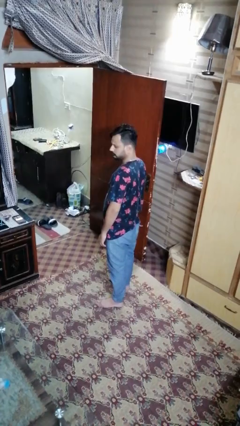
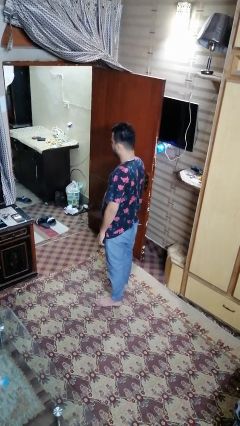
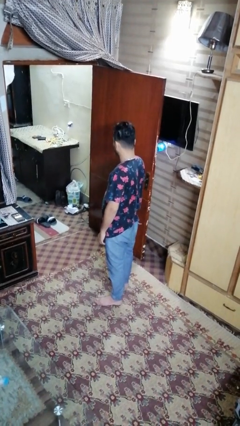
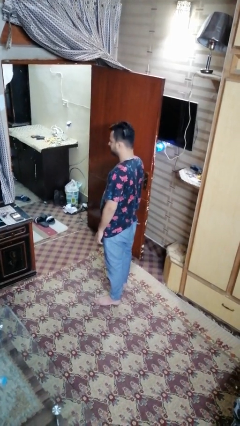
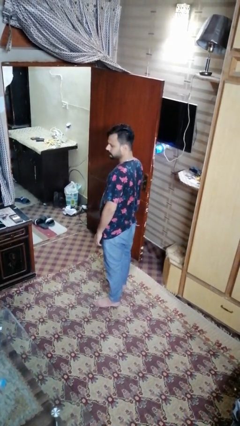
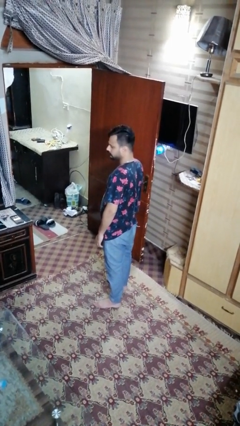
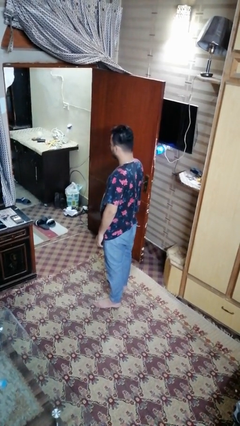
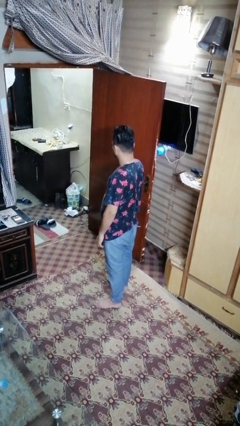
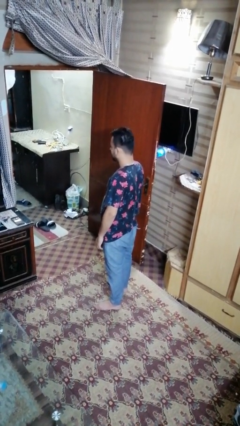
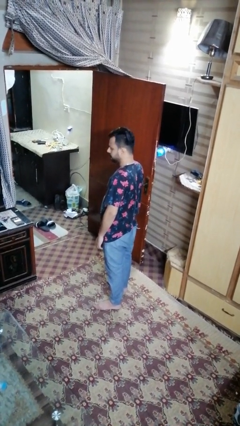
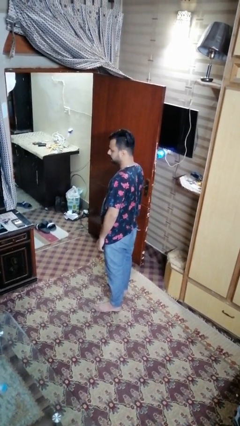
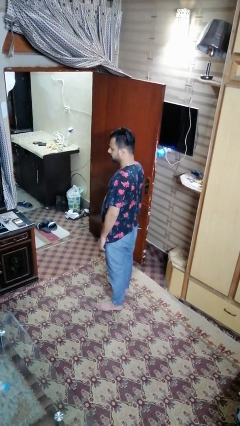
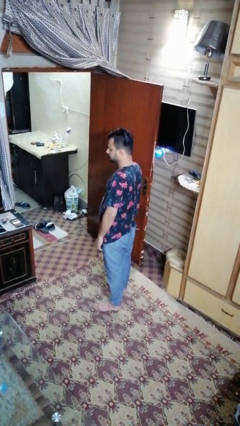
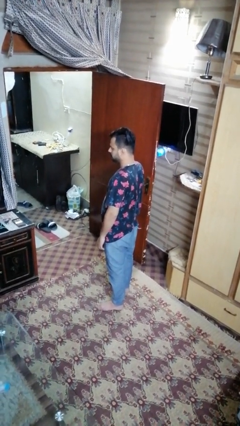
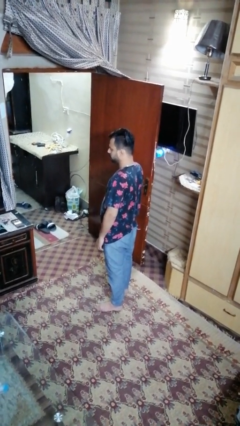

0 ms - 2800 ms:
person shakes head

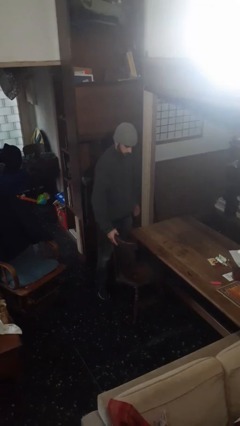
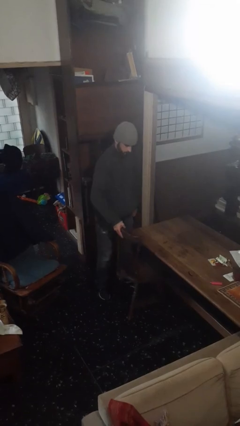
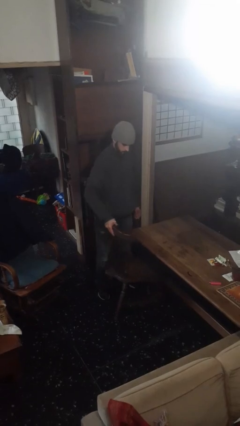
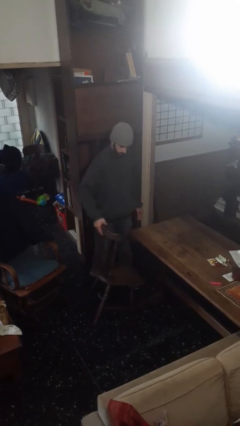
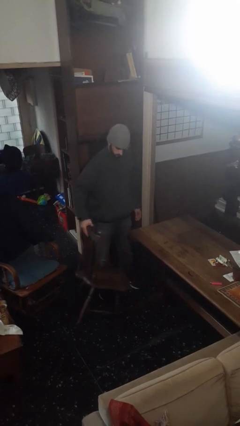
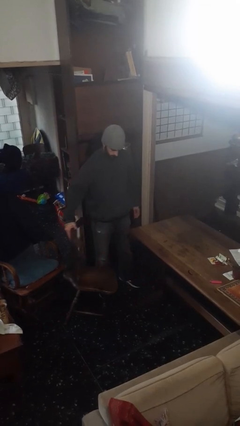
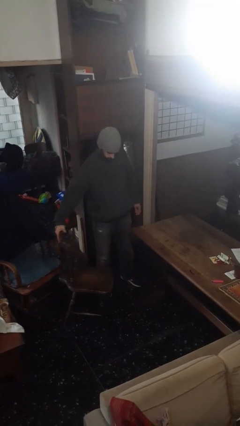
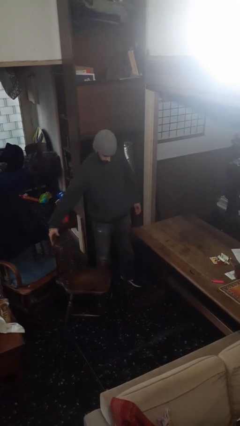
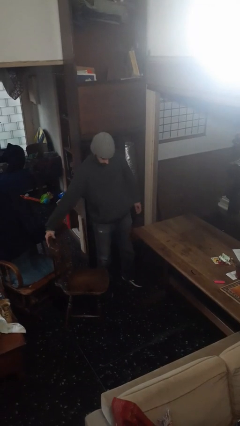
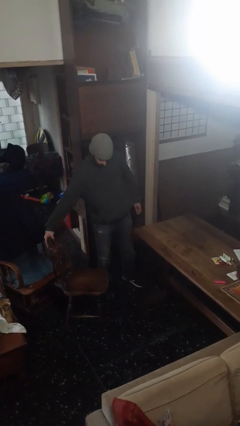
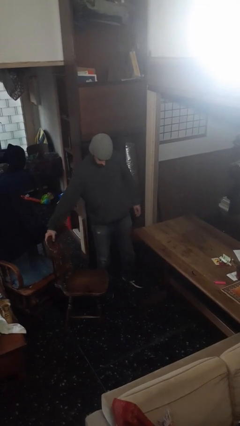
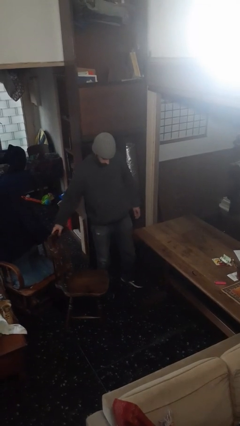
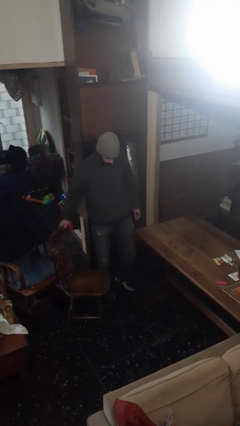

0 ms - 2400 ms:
person pulls out chair

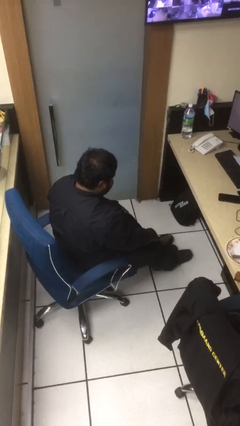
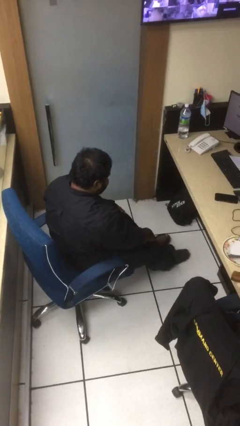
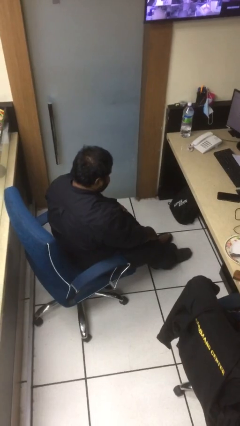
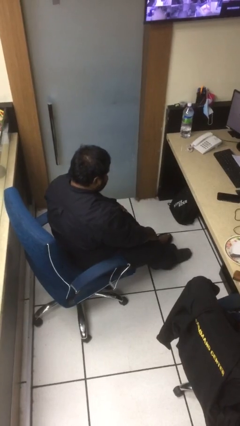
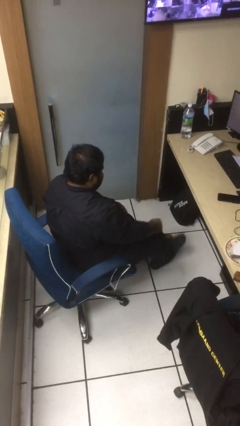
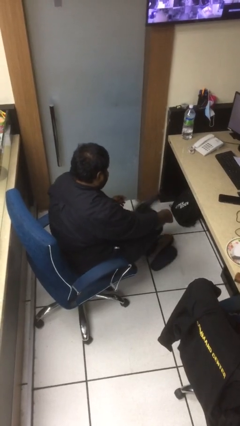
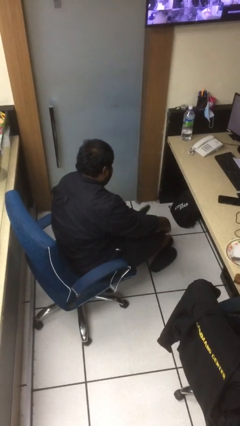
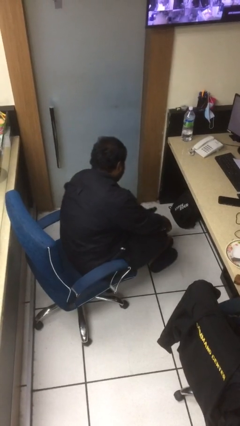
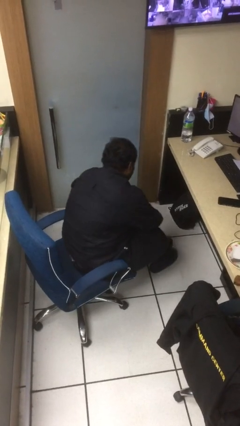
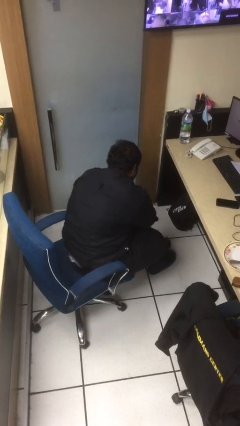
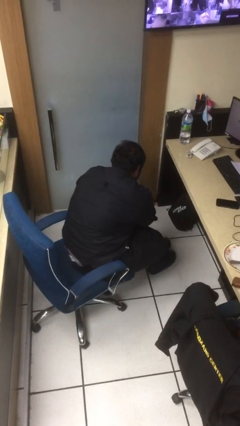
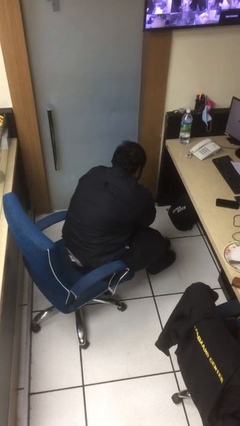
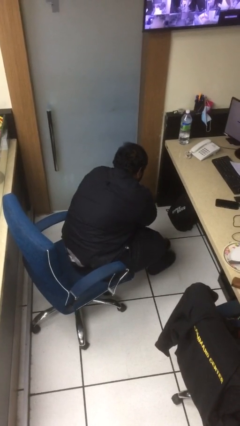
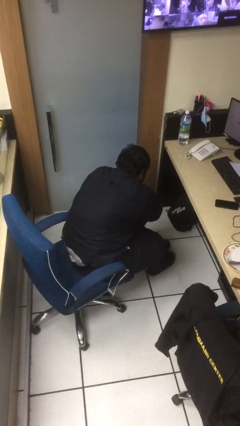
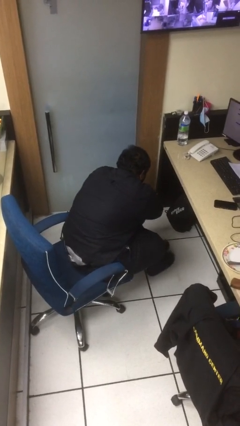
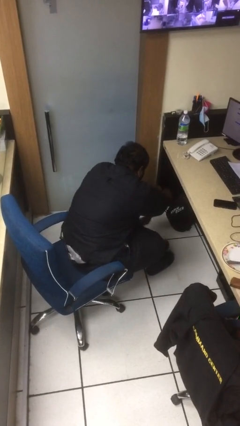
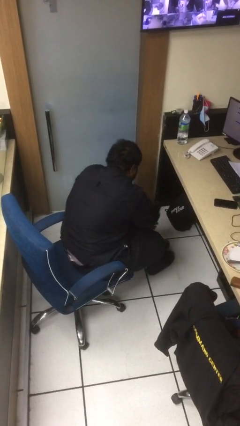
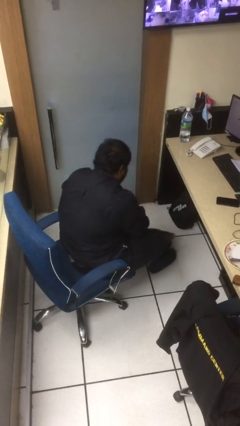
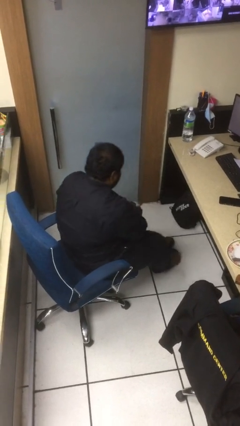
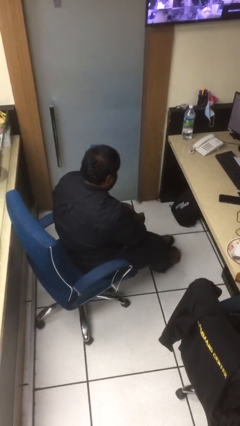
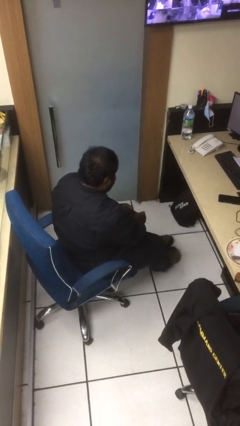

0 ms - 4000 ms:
person takes off socks

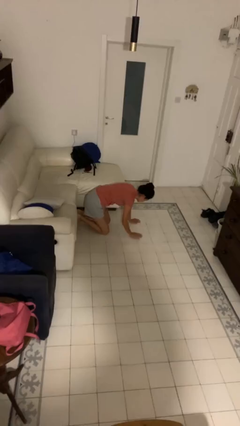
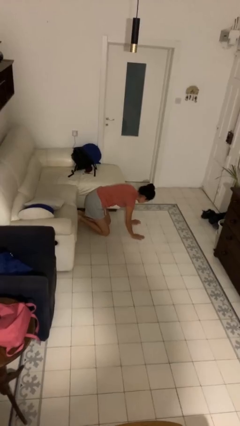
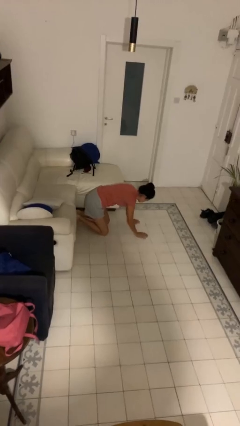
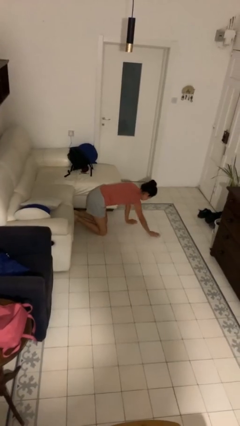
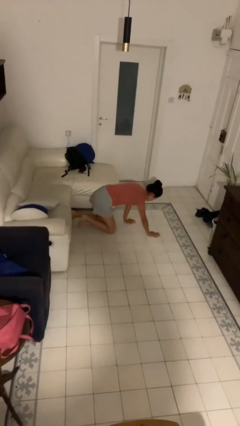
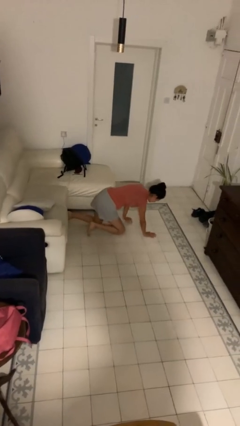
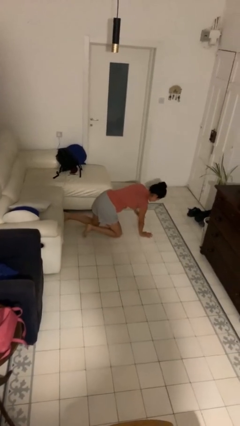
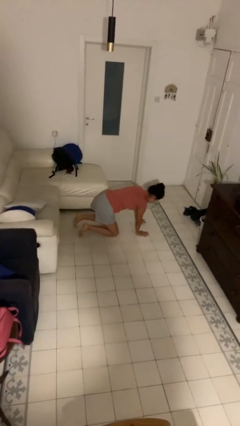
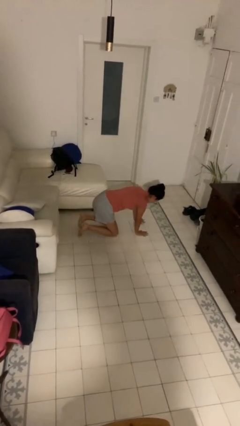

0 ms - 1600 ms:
person crawls

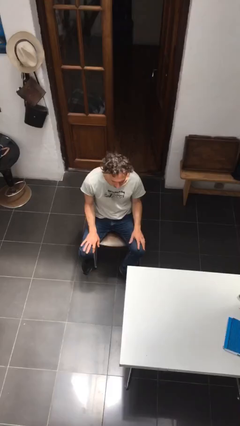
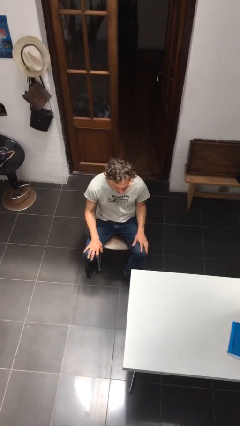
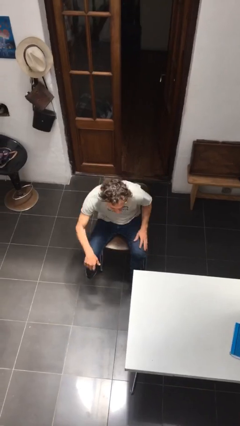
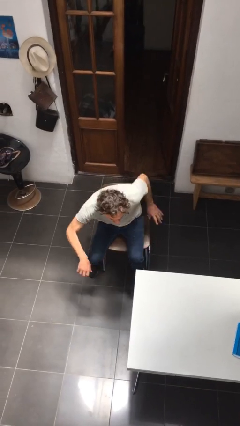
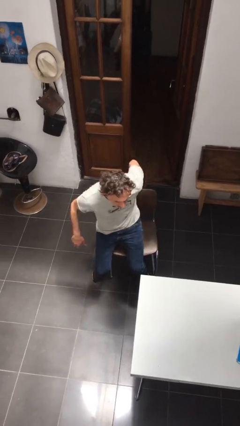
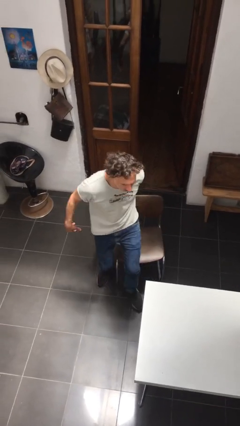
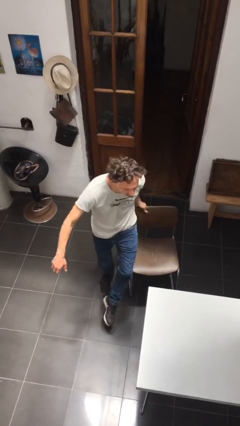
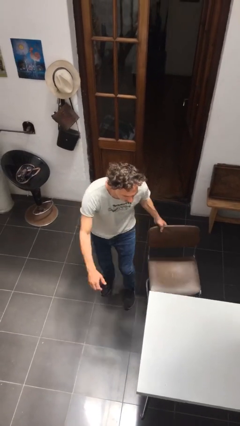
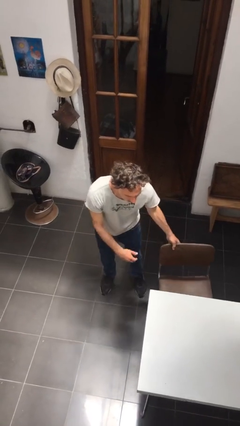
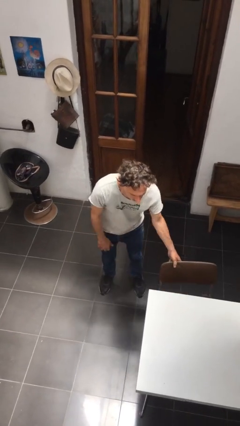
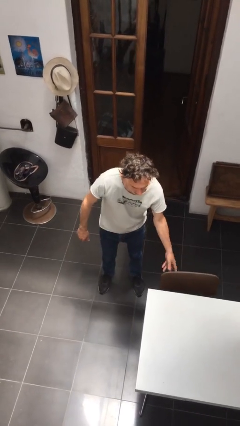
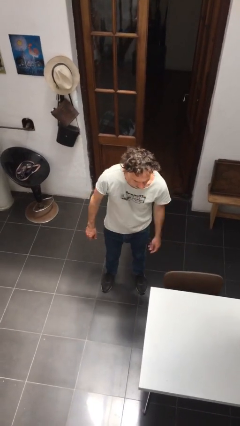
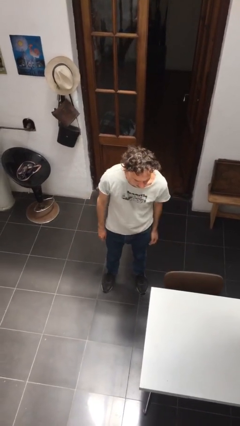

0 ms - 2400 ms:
person stands up

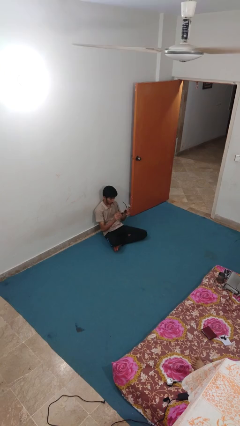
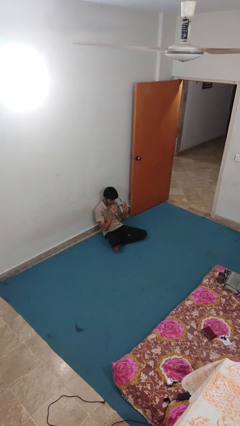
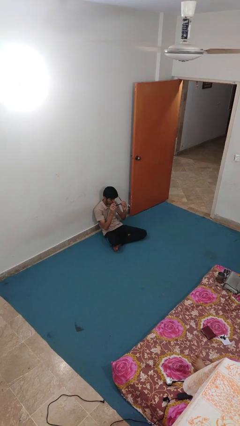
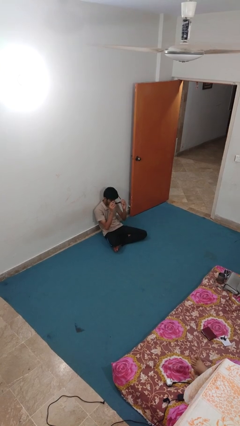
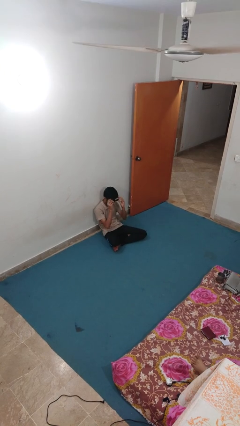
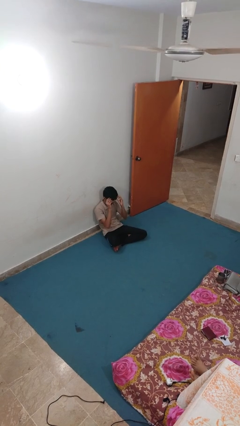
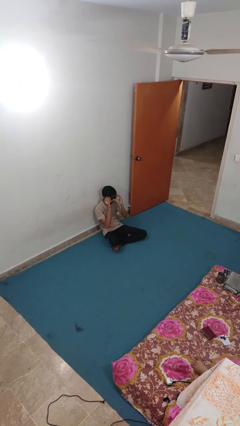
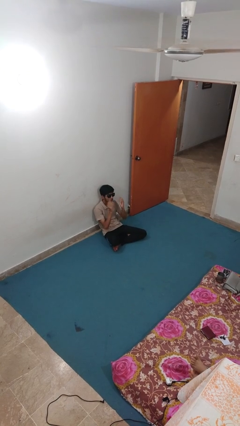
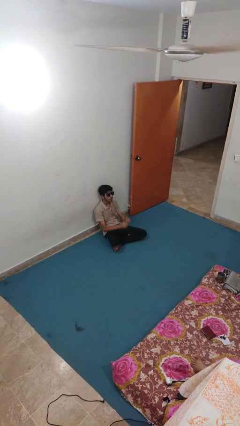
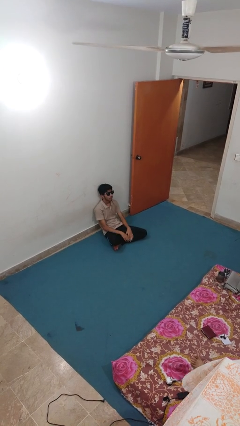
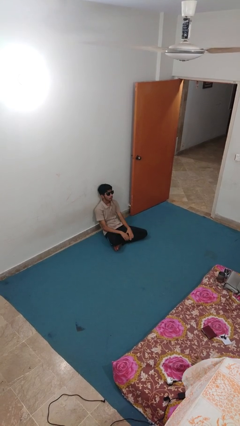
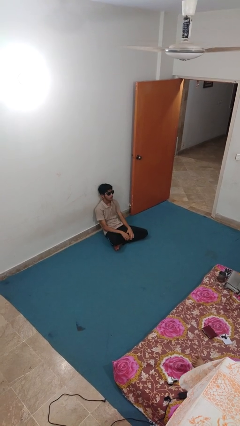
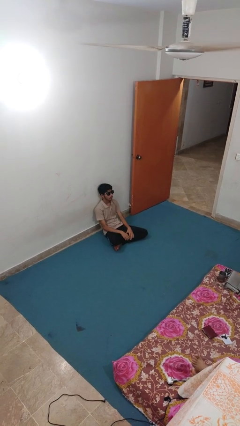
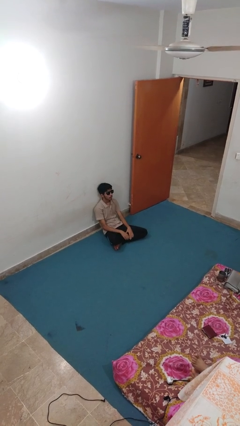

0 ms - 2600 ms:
person puts on sunglasses

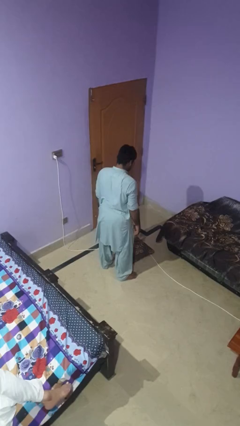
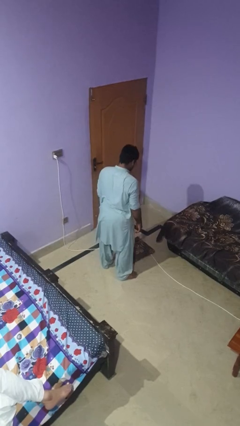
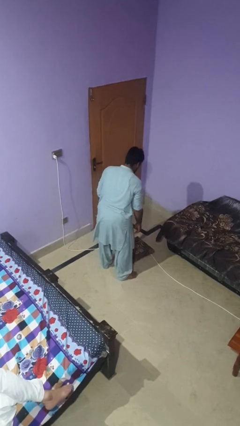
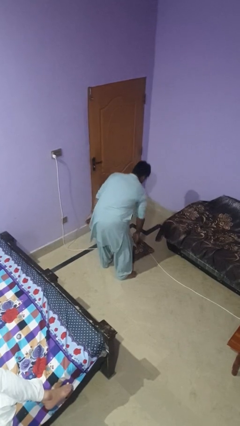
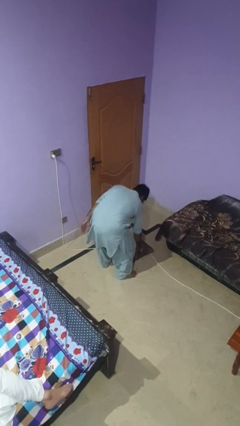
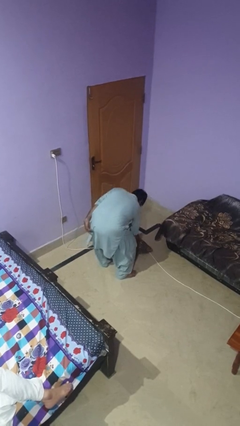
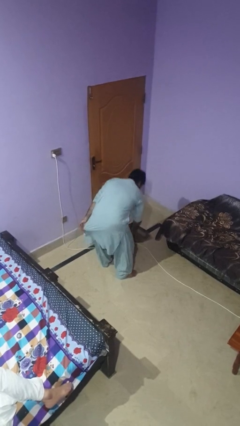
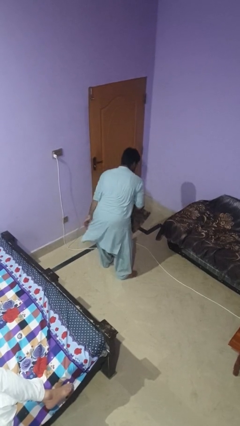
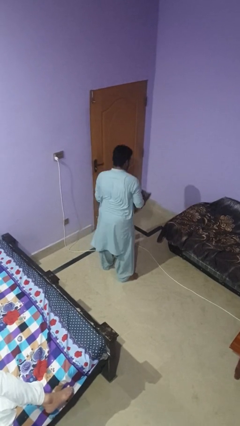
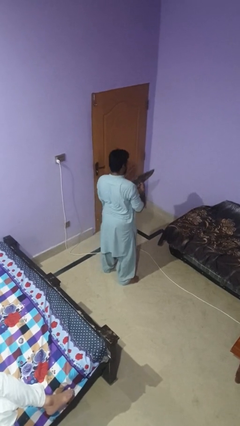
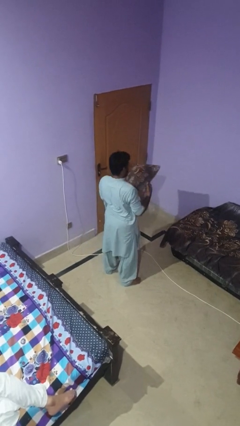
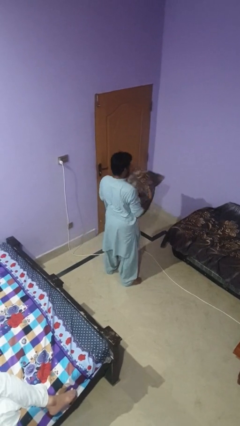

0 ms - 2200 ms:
person picks up object from floor
